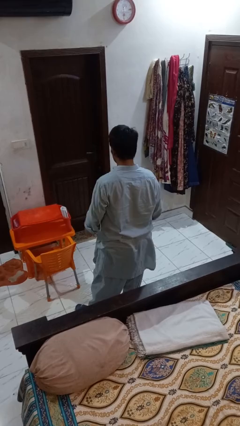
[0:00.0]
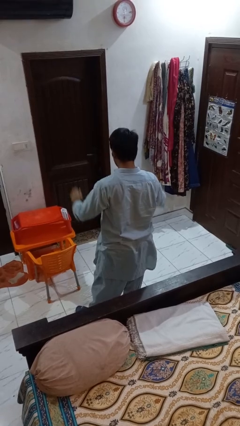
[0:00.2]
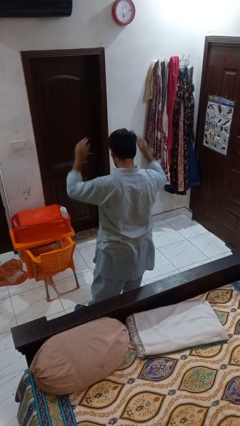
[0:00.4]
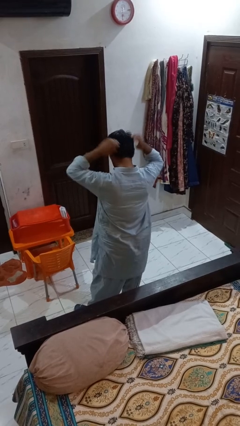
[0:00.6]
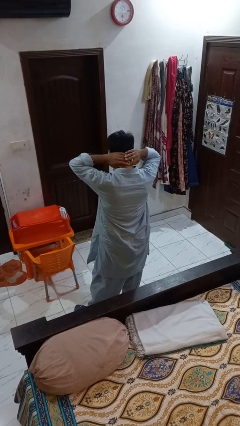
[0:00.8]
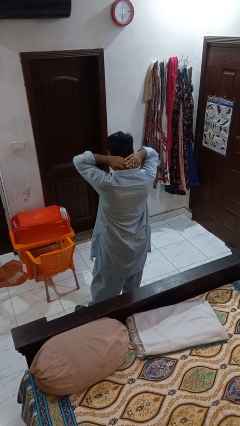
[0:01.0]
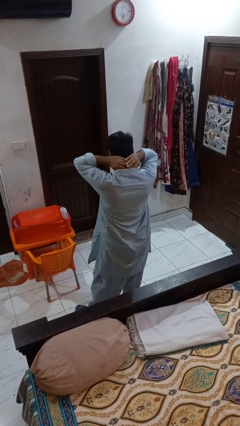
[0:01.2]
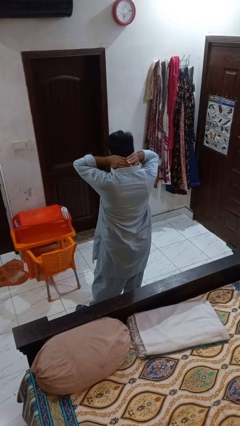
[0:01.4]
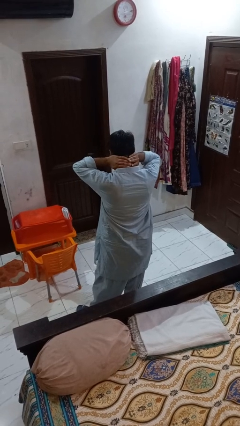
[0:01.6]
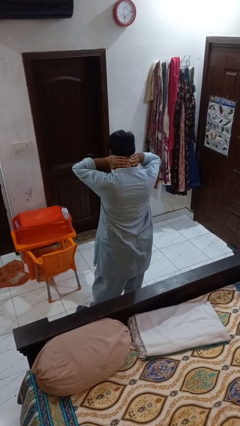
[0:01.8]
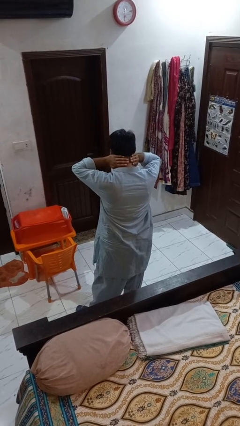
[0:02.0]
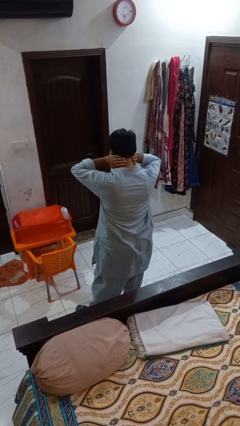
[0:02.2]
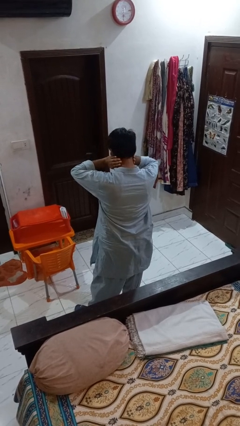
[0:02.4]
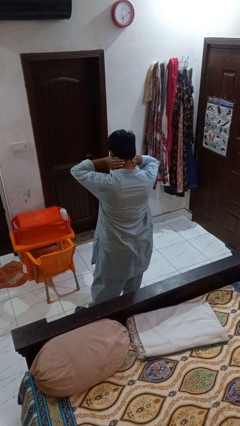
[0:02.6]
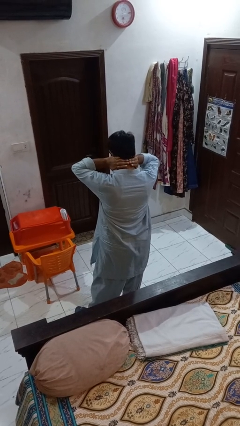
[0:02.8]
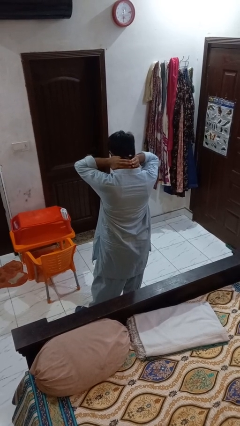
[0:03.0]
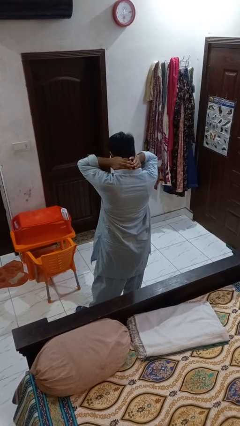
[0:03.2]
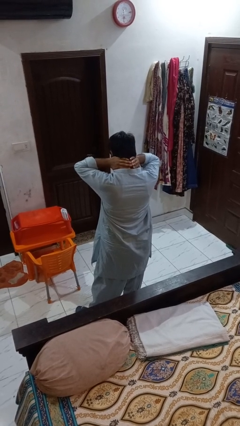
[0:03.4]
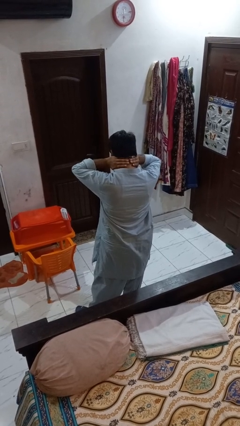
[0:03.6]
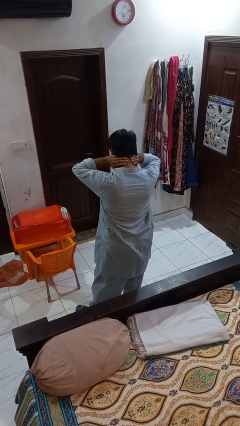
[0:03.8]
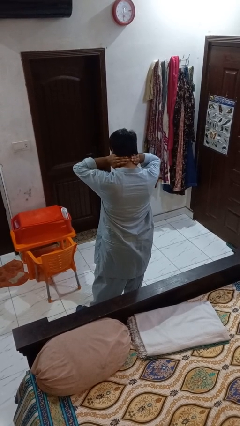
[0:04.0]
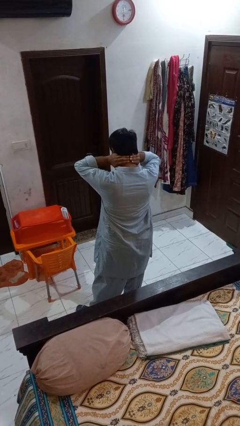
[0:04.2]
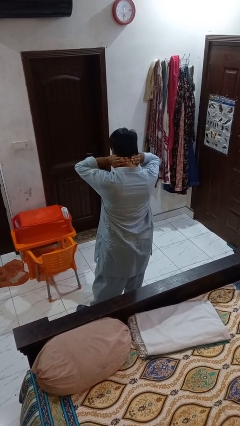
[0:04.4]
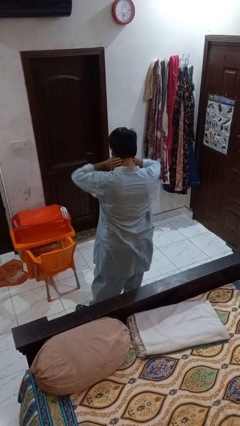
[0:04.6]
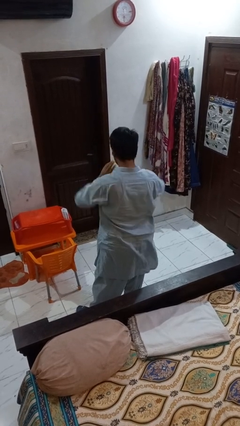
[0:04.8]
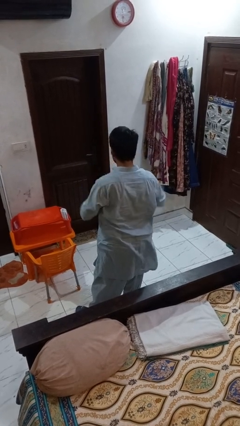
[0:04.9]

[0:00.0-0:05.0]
person rubs neck

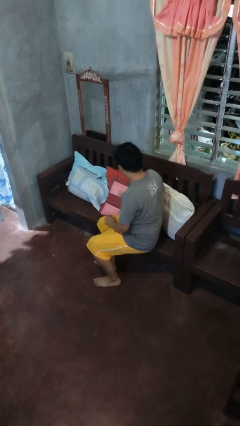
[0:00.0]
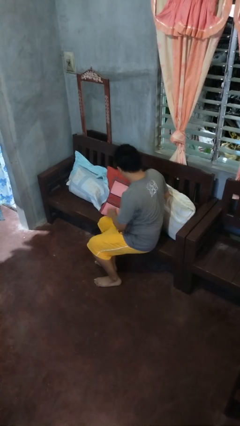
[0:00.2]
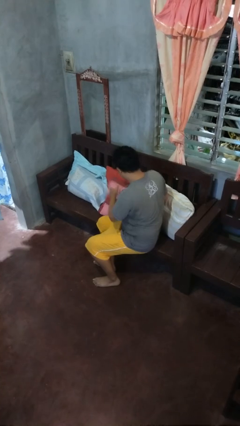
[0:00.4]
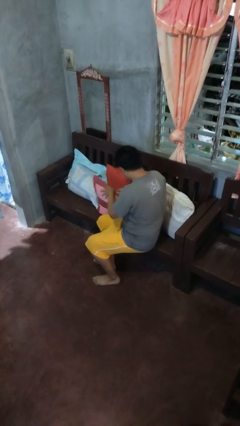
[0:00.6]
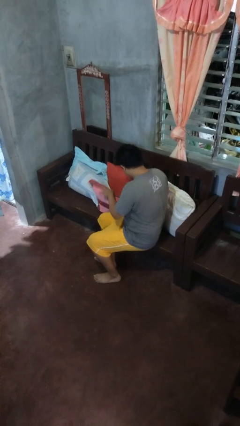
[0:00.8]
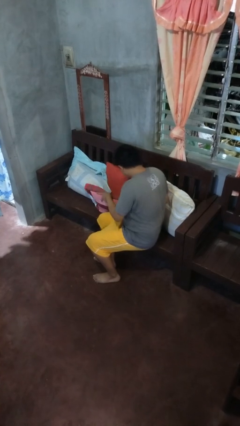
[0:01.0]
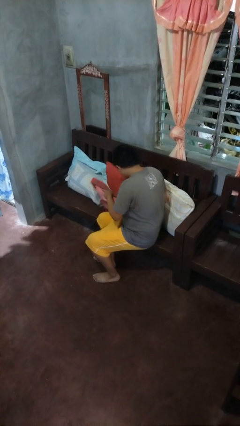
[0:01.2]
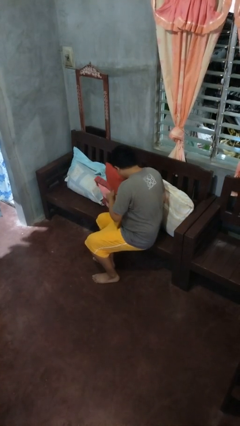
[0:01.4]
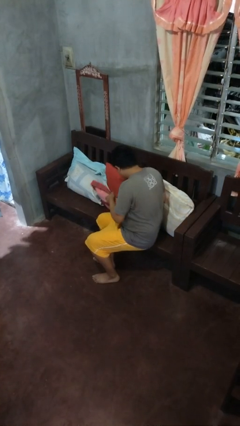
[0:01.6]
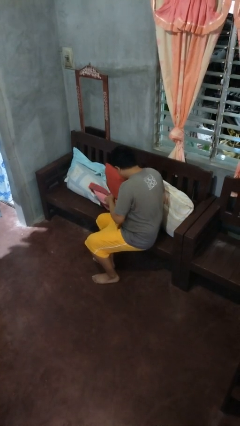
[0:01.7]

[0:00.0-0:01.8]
person searches in couch

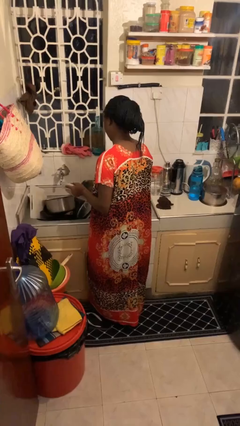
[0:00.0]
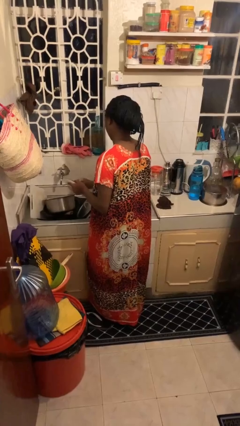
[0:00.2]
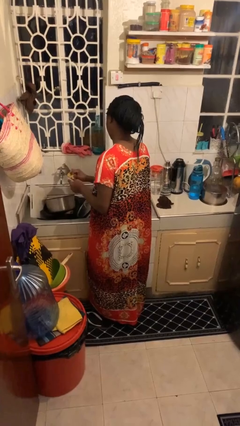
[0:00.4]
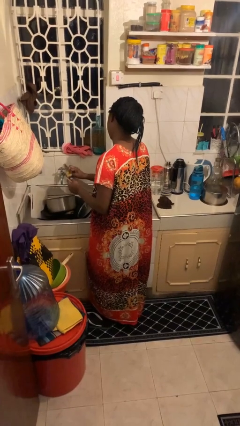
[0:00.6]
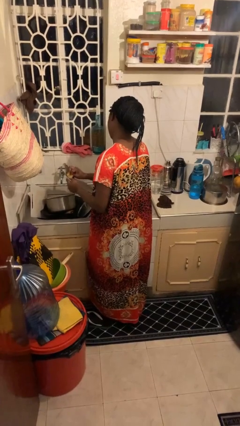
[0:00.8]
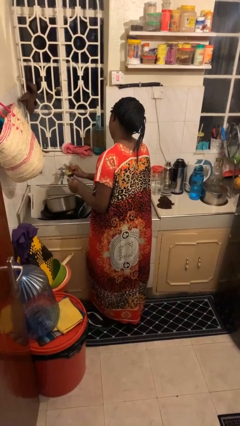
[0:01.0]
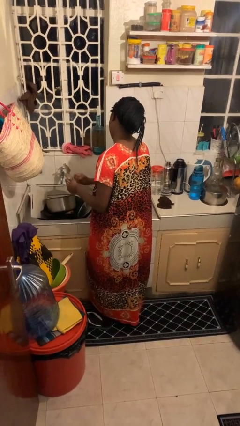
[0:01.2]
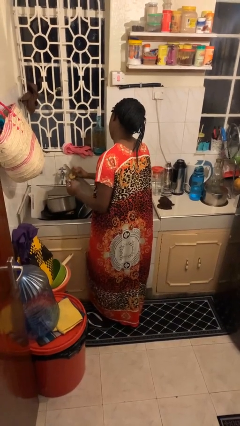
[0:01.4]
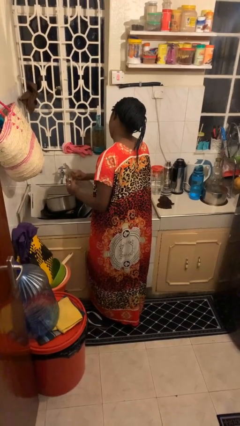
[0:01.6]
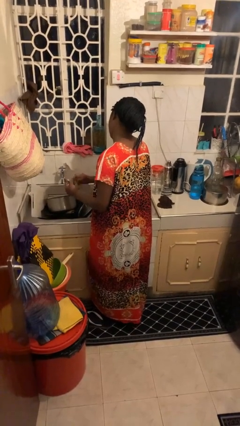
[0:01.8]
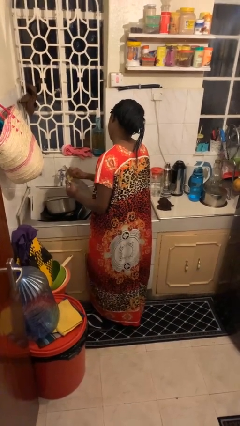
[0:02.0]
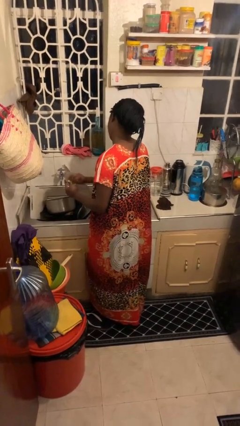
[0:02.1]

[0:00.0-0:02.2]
person washes dish

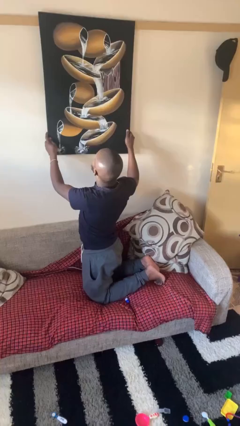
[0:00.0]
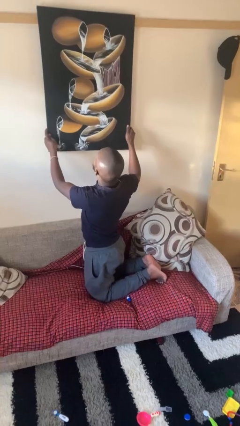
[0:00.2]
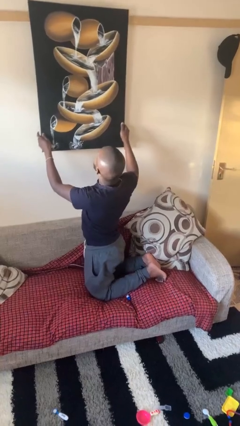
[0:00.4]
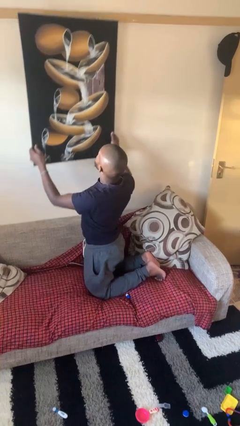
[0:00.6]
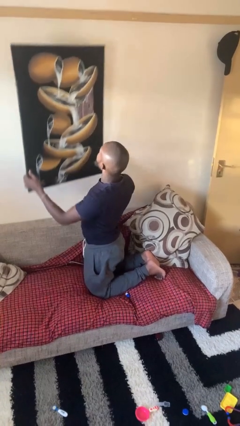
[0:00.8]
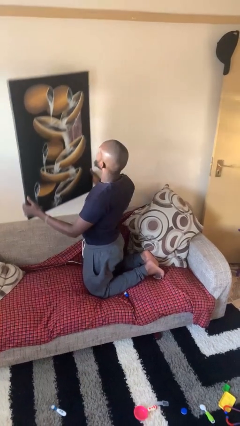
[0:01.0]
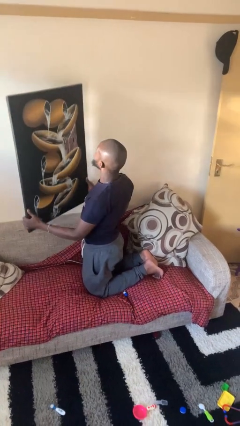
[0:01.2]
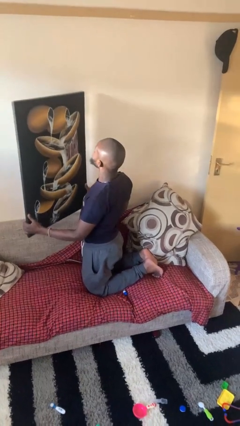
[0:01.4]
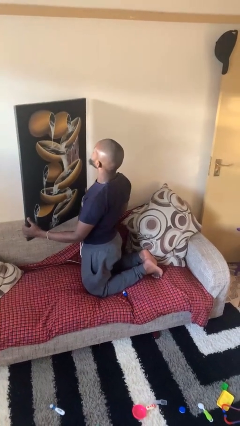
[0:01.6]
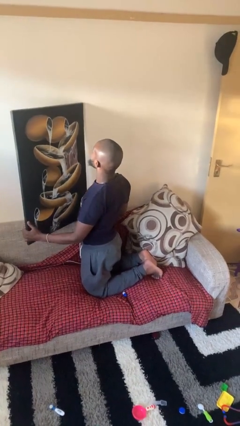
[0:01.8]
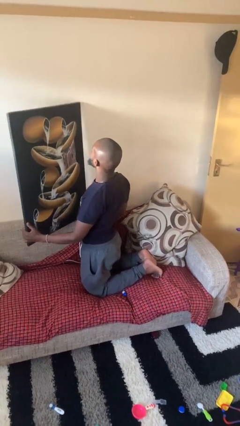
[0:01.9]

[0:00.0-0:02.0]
person takes down picture frame

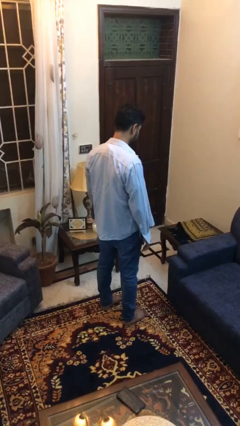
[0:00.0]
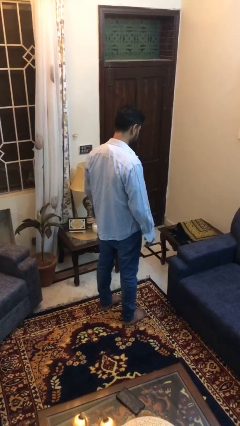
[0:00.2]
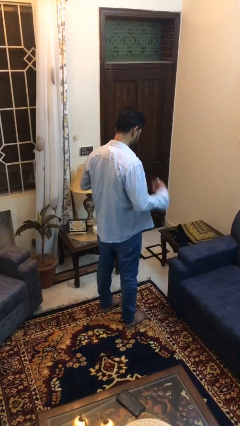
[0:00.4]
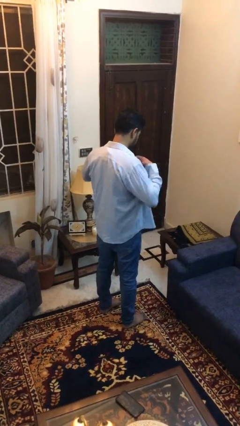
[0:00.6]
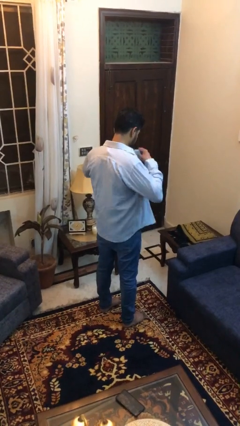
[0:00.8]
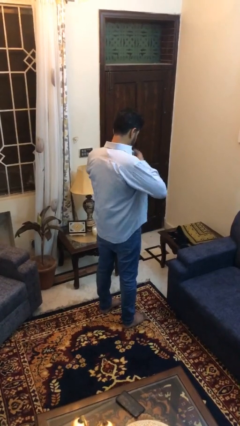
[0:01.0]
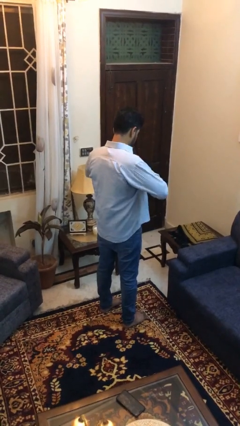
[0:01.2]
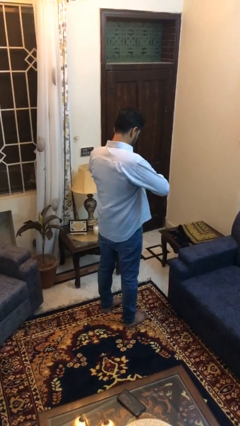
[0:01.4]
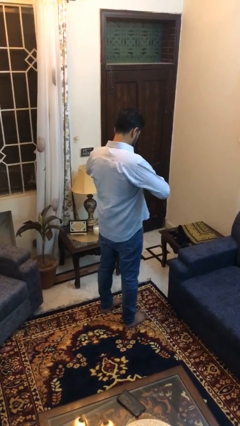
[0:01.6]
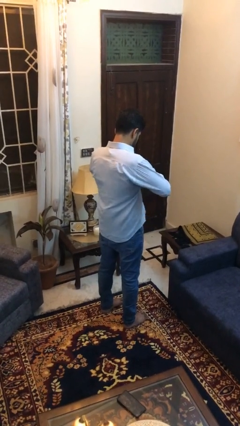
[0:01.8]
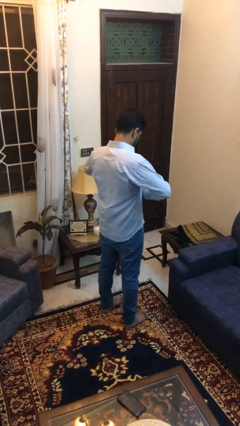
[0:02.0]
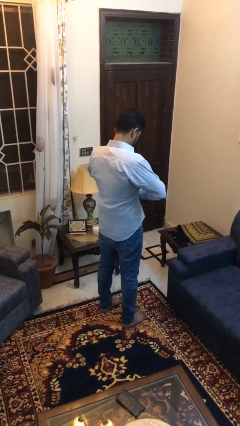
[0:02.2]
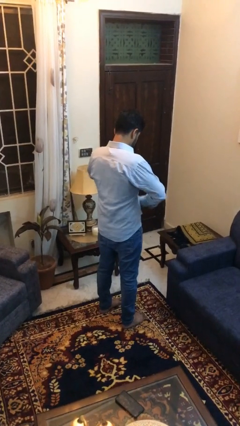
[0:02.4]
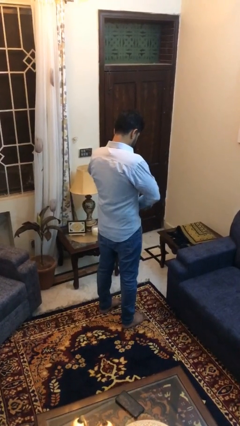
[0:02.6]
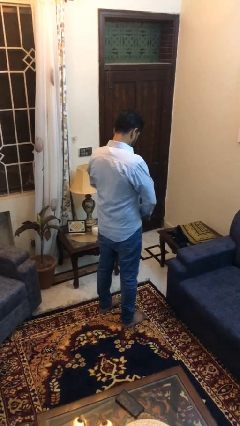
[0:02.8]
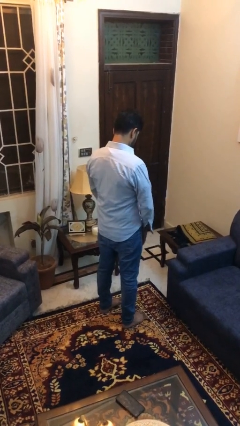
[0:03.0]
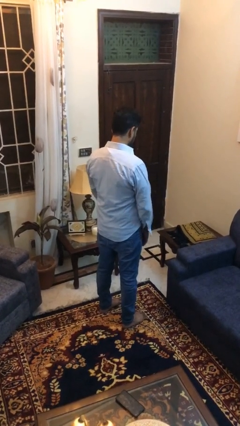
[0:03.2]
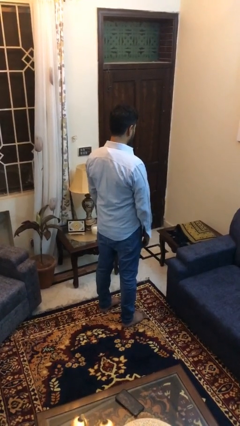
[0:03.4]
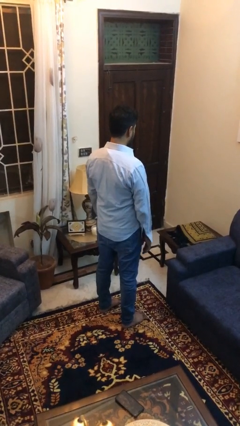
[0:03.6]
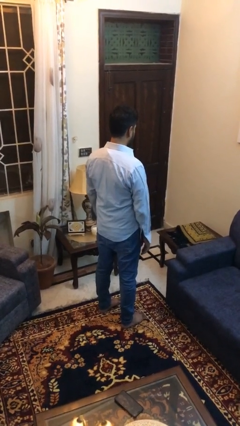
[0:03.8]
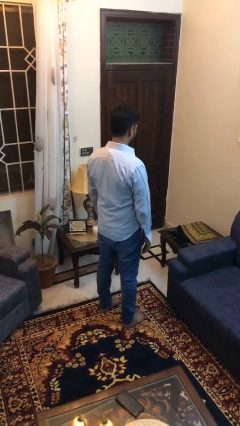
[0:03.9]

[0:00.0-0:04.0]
person buttons shirt

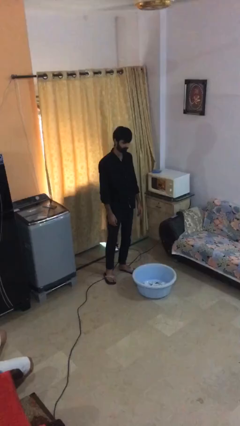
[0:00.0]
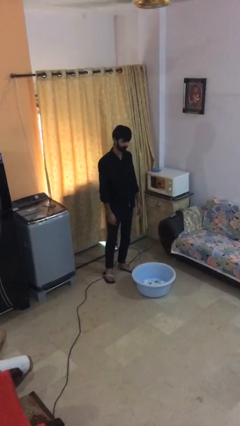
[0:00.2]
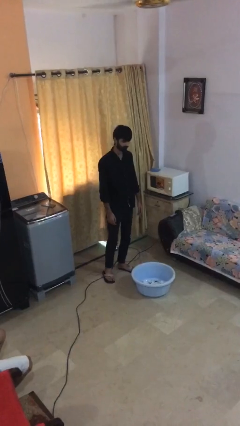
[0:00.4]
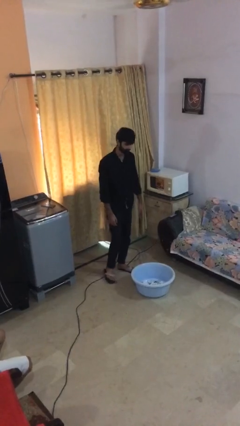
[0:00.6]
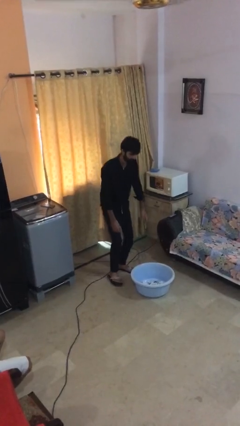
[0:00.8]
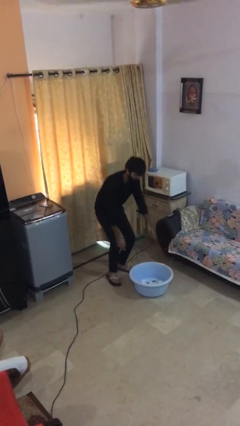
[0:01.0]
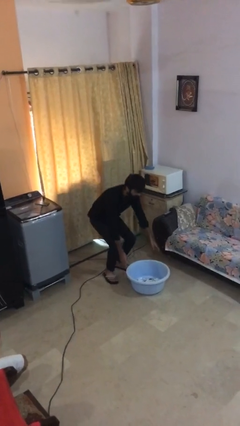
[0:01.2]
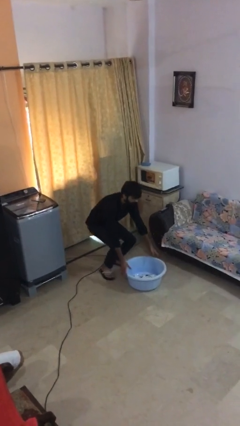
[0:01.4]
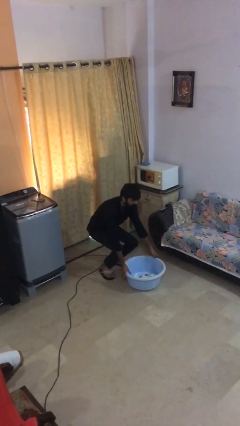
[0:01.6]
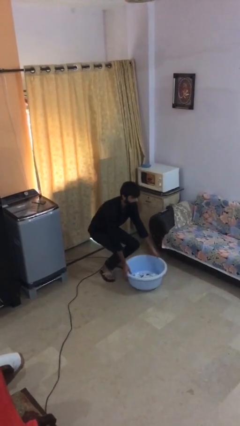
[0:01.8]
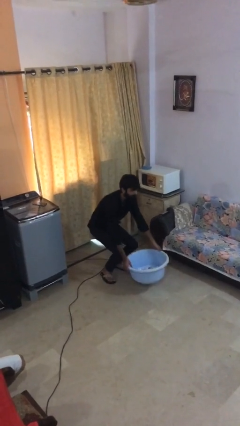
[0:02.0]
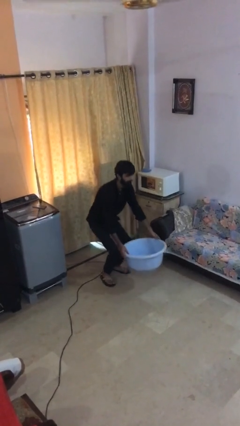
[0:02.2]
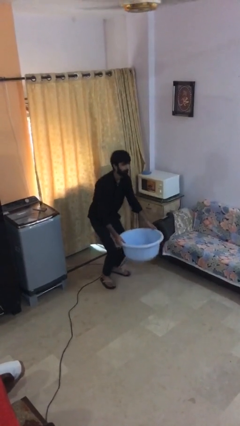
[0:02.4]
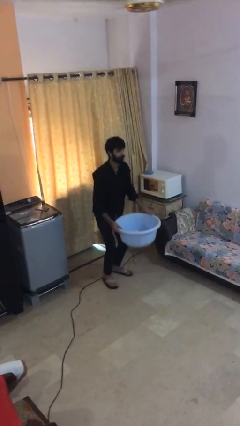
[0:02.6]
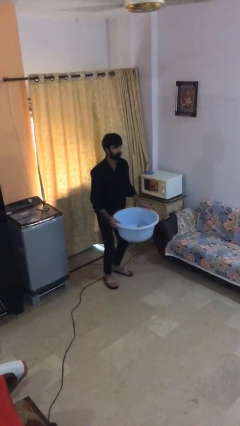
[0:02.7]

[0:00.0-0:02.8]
person picks up object from floor
